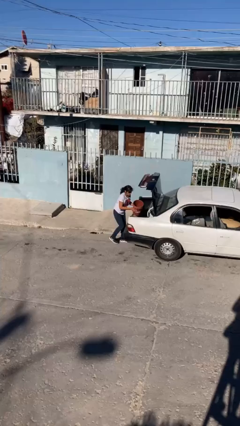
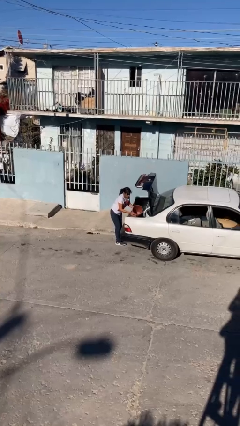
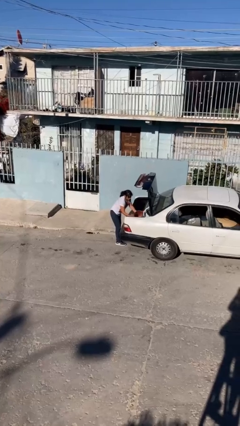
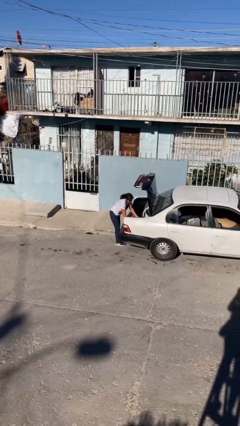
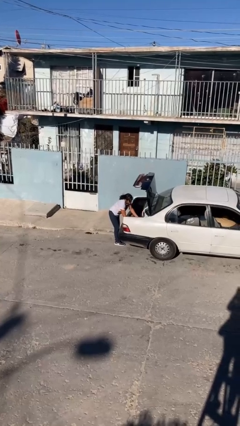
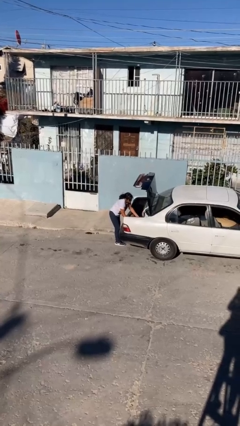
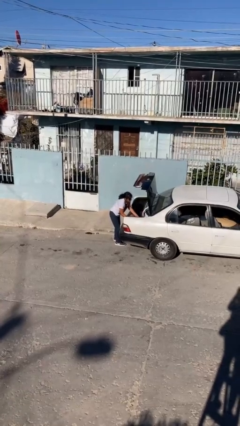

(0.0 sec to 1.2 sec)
person loads car

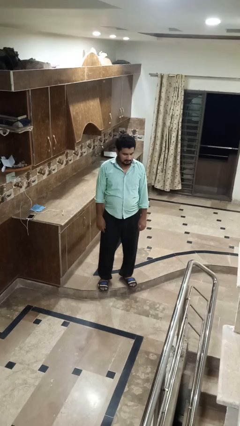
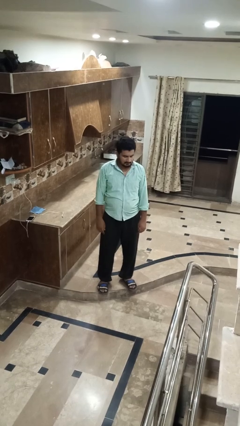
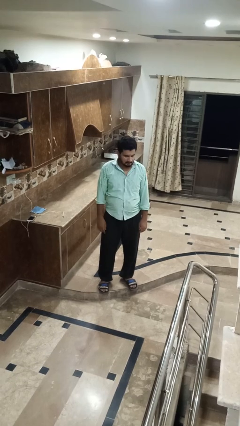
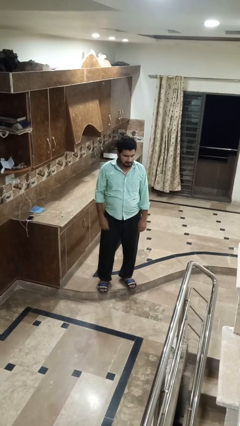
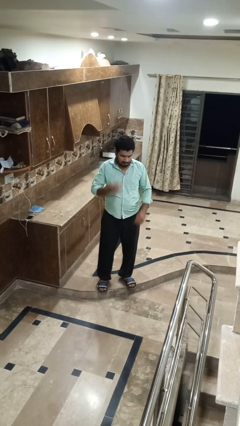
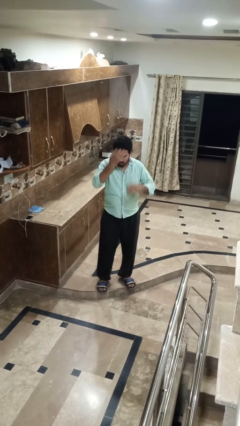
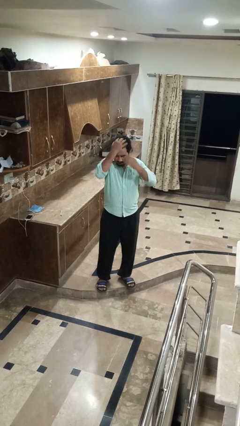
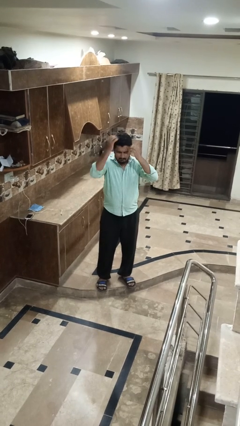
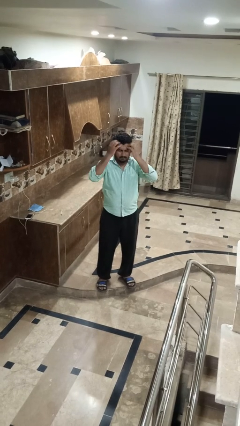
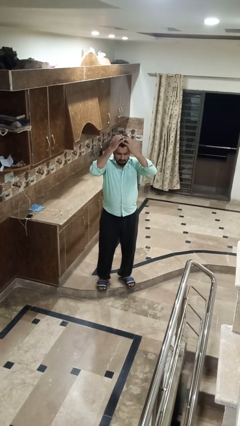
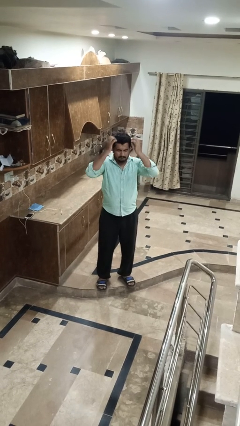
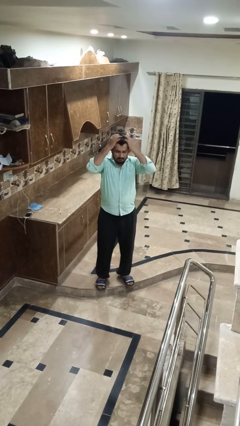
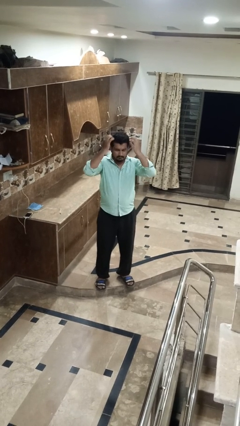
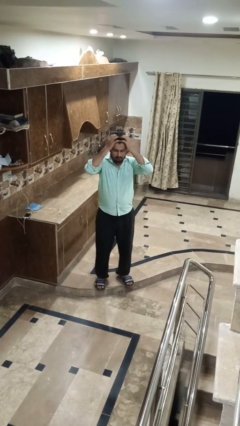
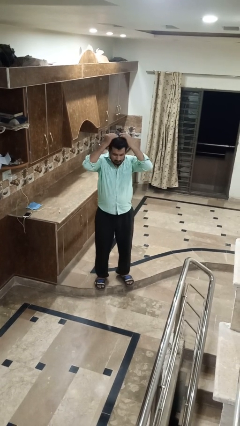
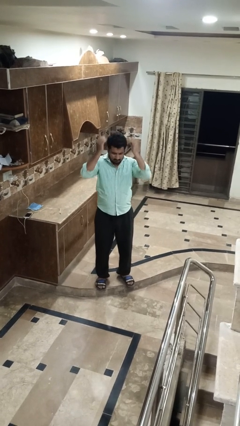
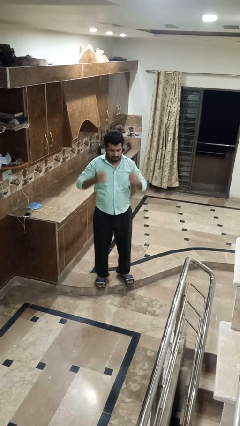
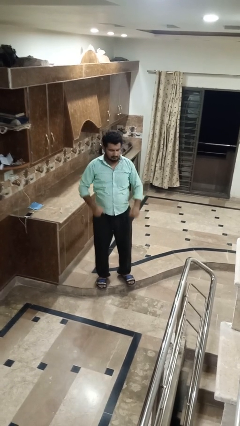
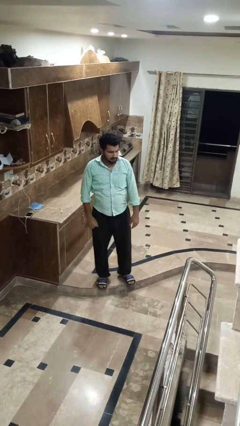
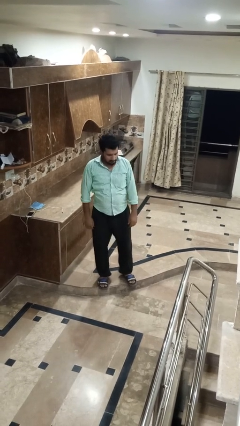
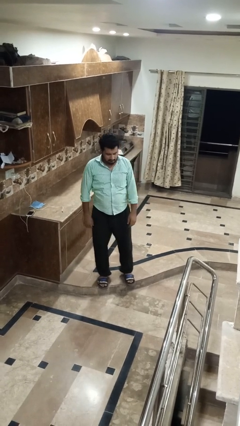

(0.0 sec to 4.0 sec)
person strokes hair

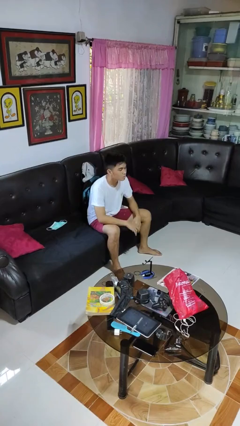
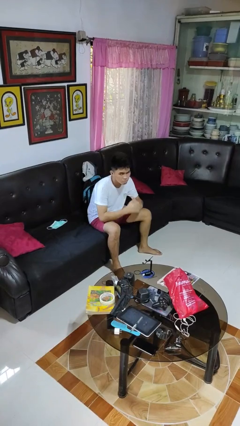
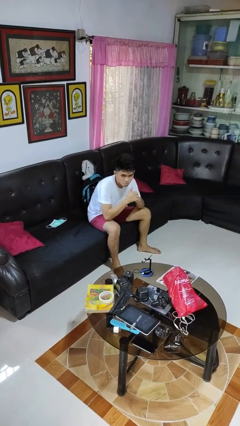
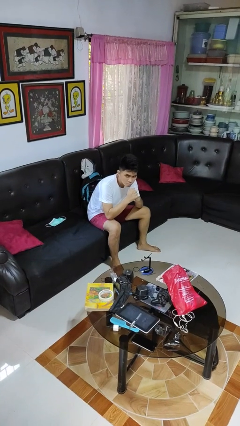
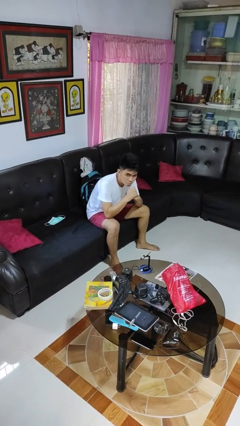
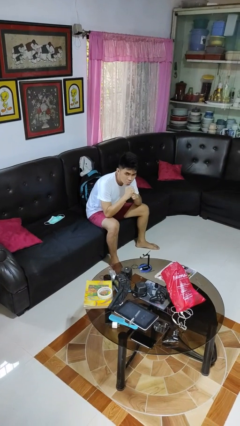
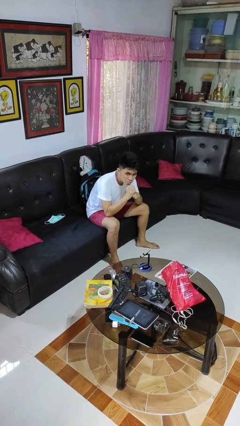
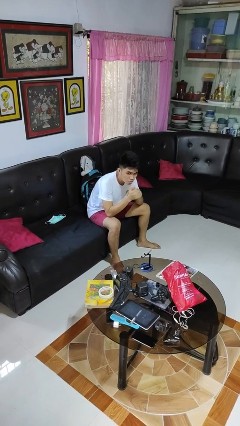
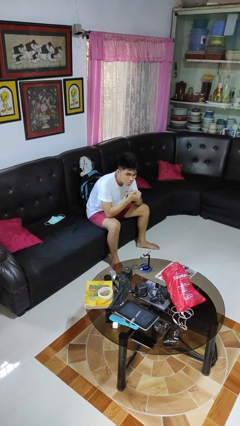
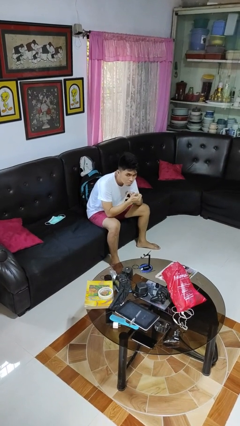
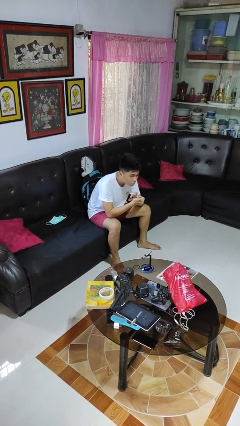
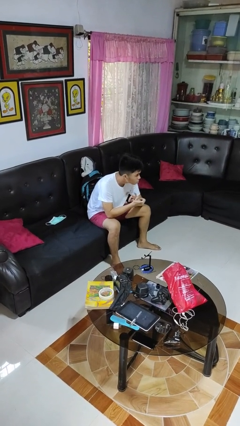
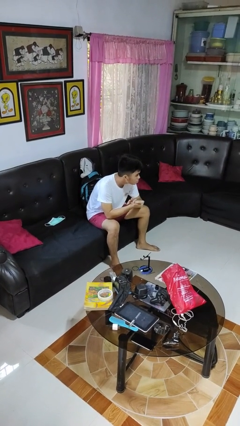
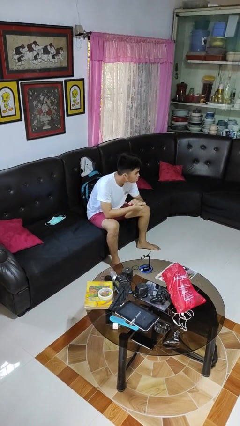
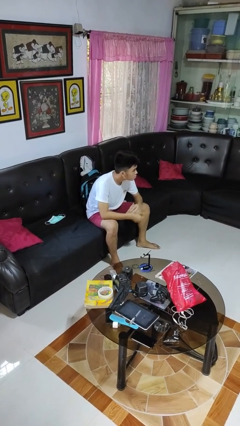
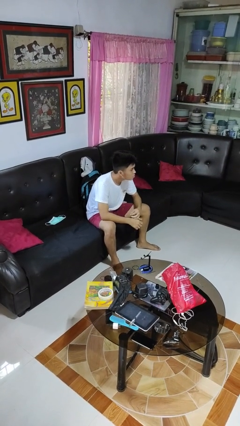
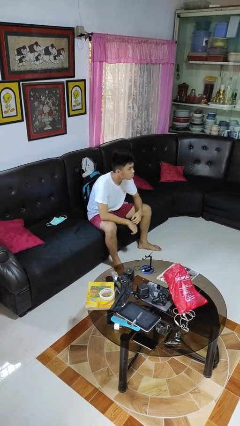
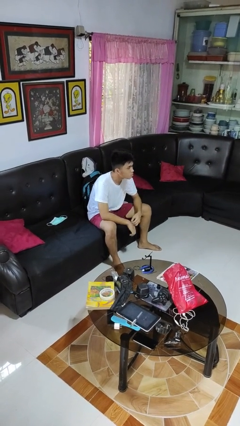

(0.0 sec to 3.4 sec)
person cracks knuckles

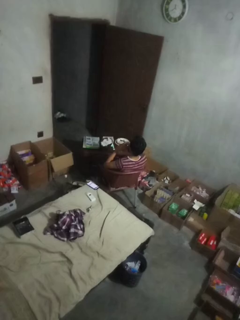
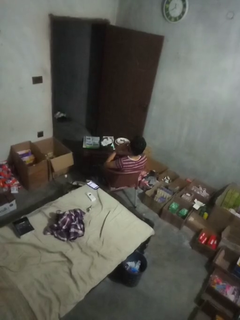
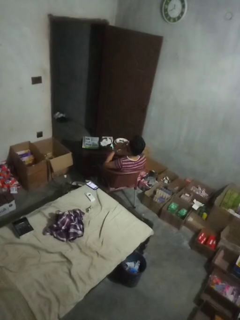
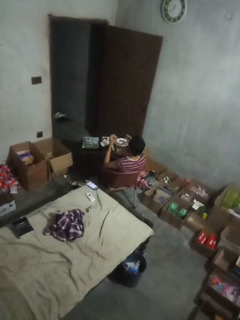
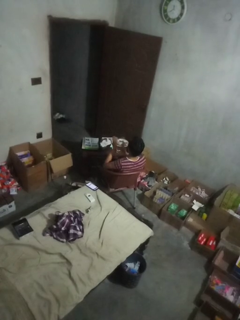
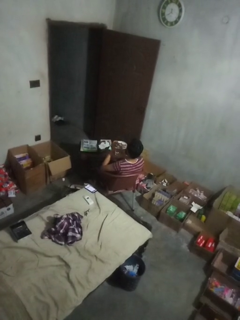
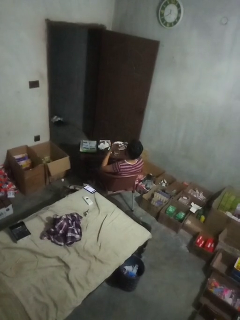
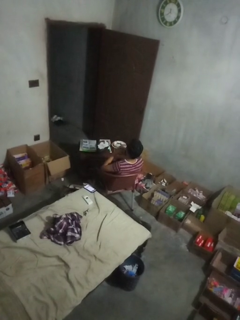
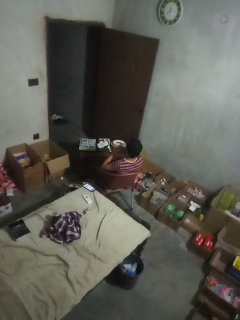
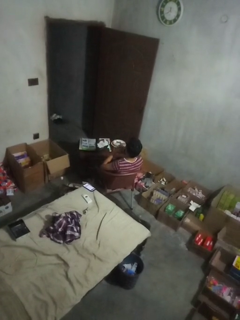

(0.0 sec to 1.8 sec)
person claps hands

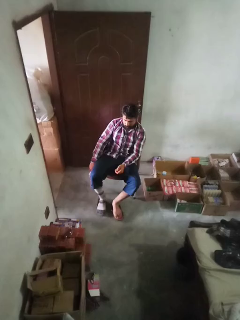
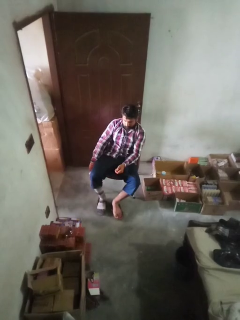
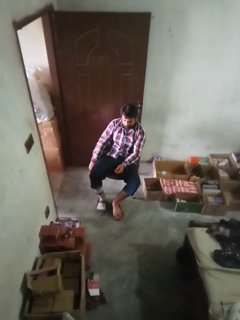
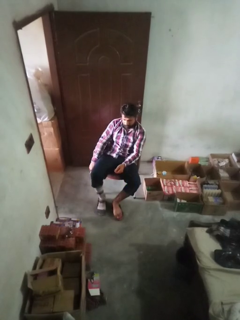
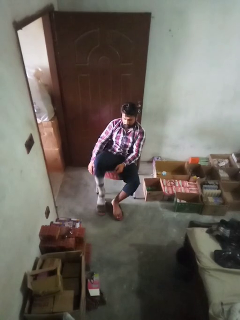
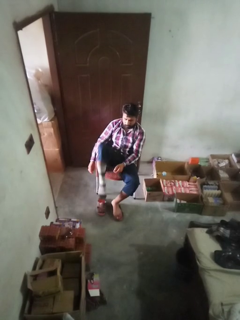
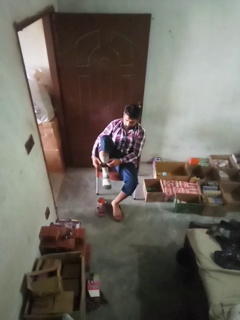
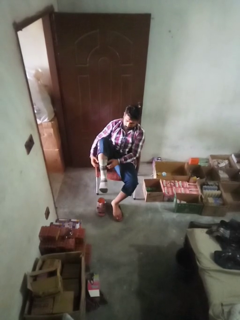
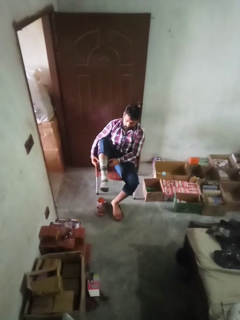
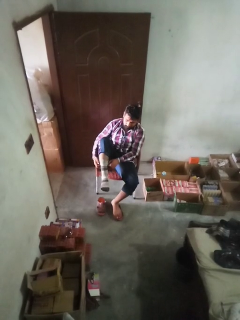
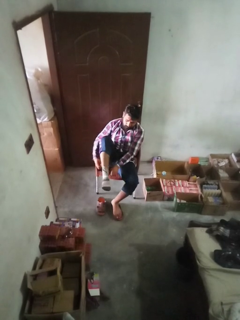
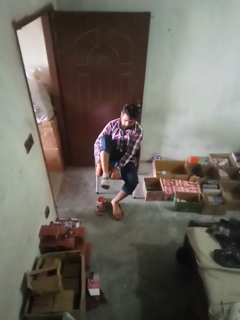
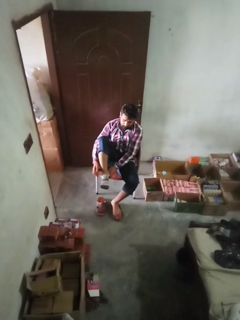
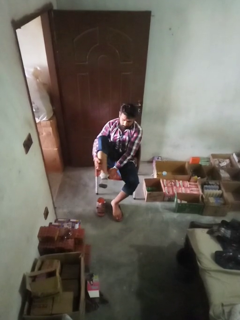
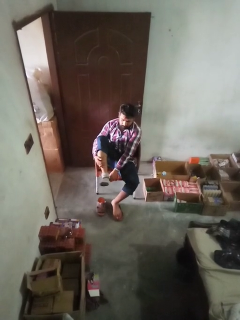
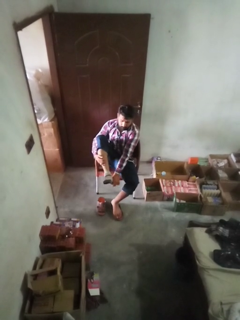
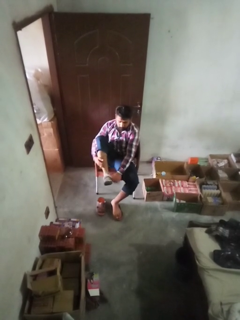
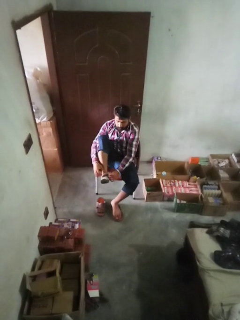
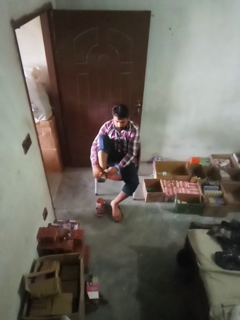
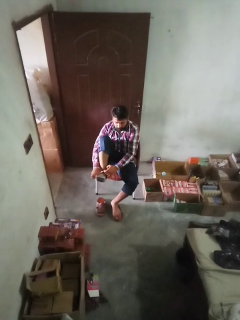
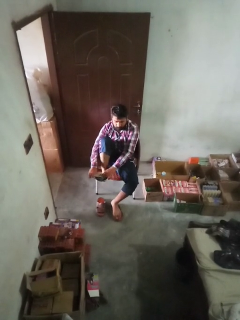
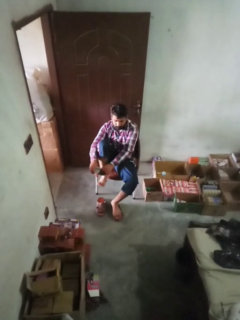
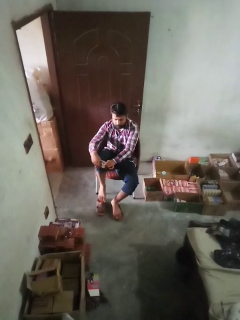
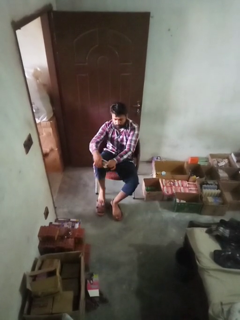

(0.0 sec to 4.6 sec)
person takes off socks

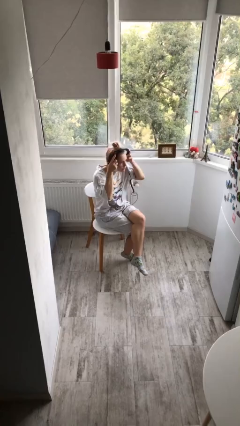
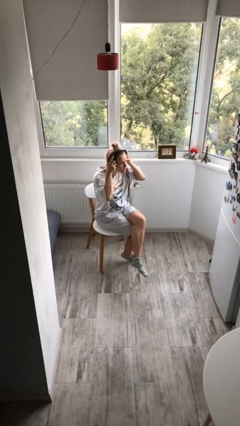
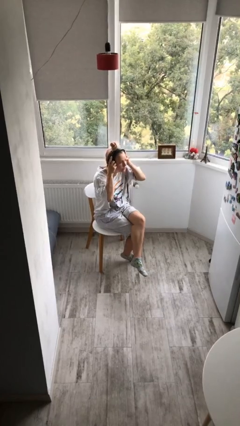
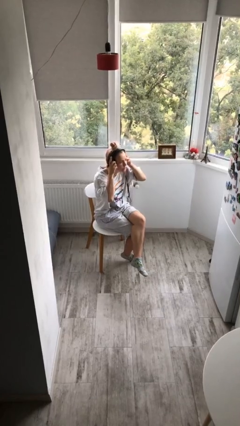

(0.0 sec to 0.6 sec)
person puts on headphones

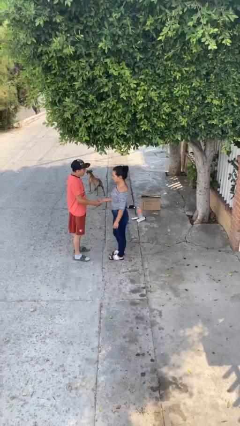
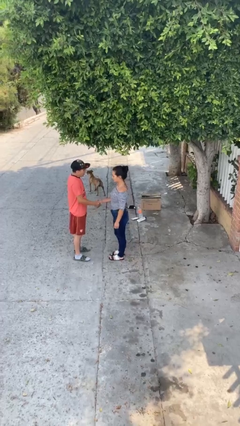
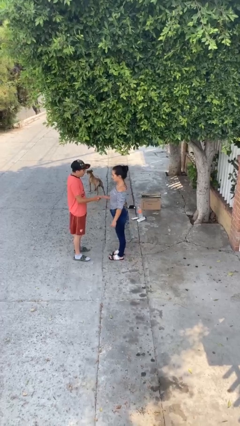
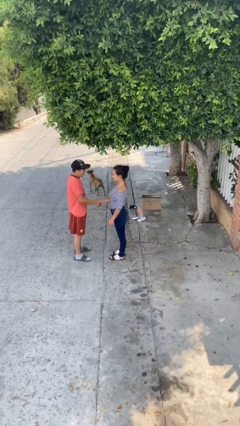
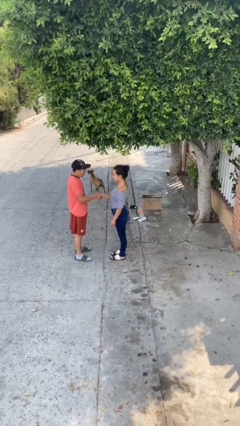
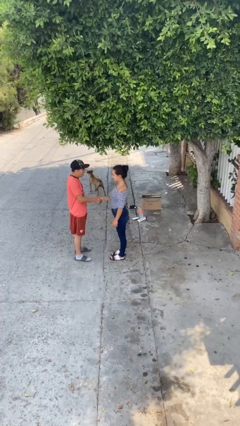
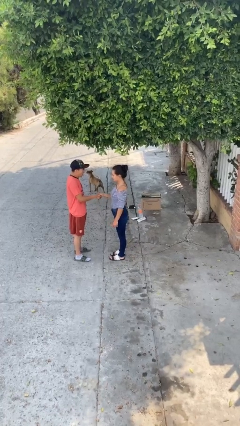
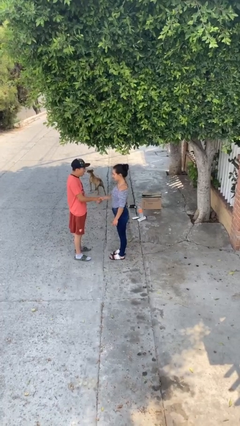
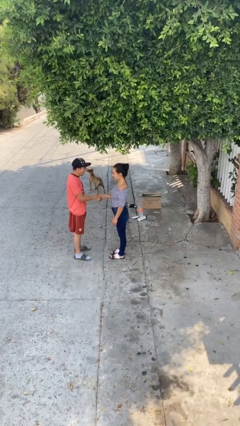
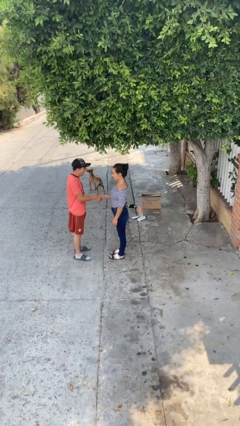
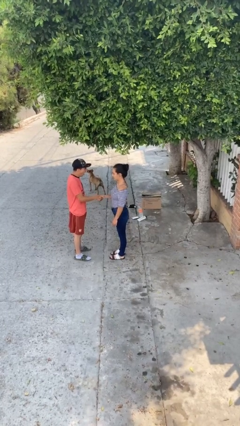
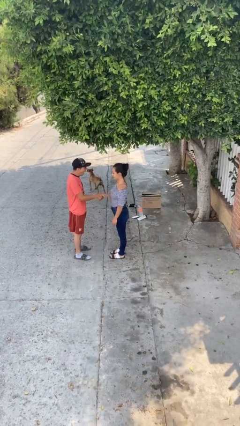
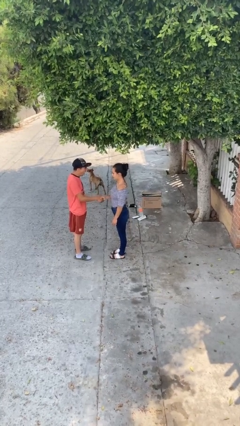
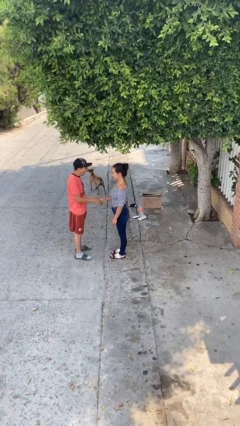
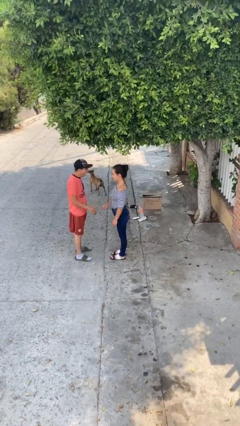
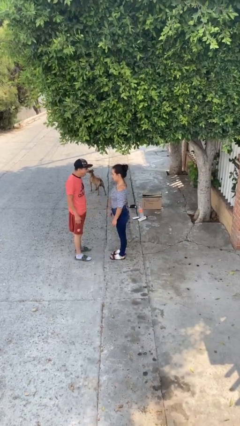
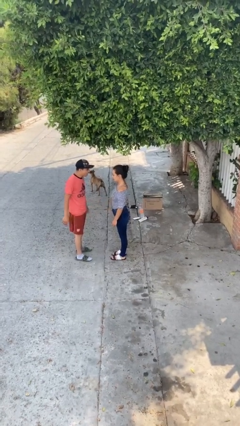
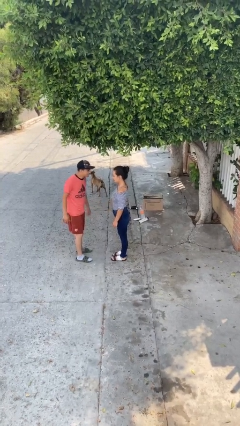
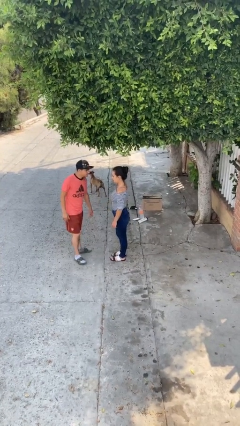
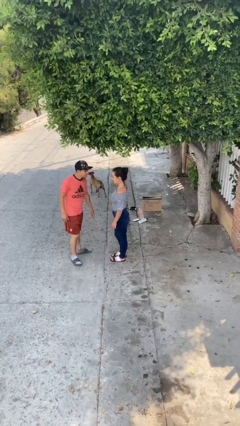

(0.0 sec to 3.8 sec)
person shakes hand
